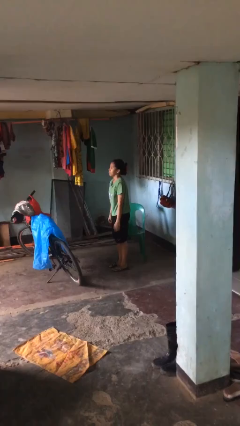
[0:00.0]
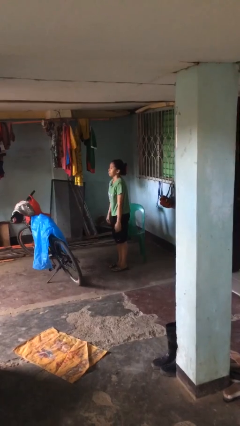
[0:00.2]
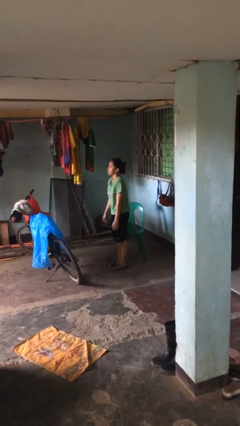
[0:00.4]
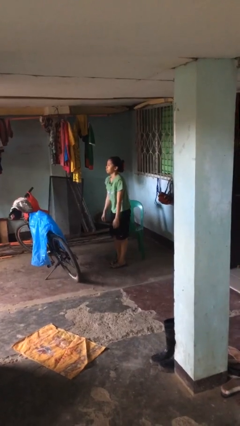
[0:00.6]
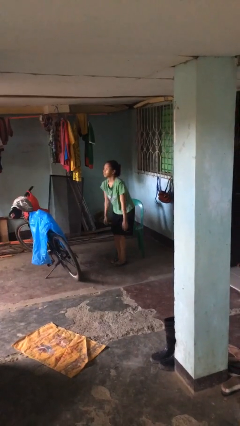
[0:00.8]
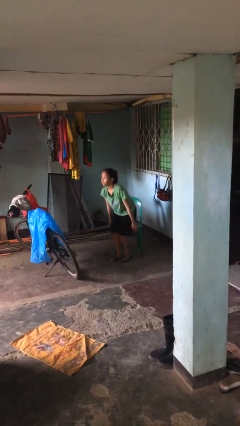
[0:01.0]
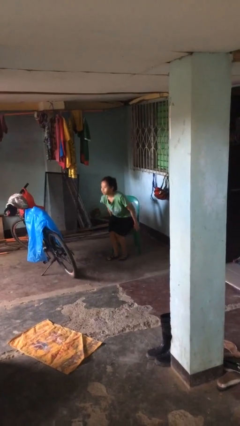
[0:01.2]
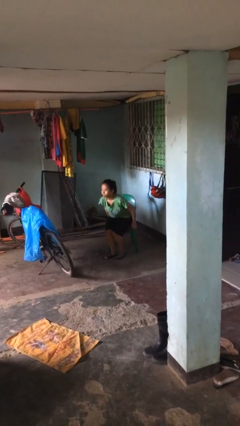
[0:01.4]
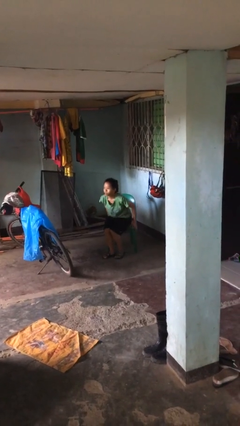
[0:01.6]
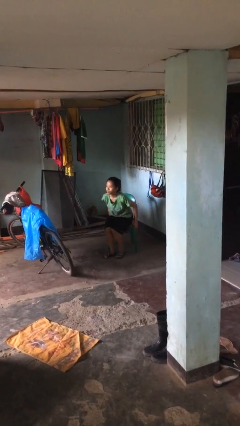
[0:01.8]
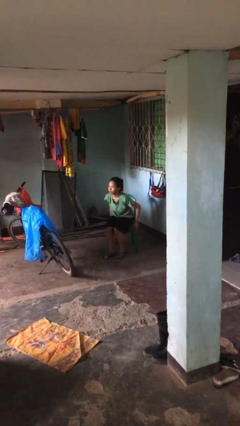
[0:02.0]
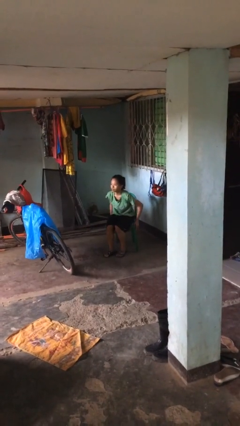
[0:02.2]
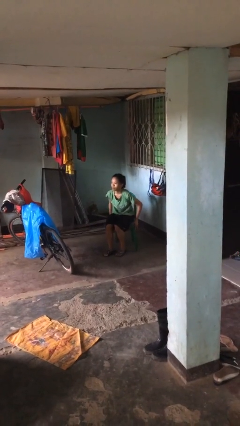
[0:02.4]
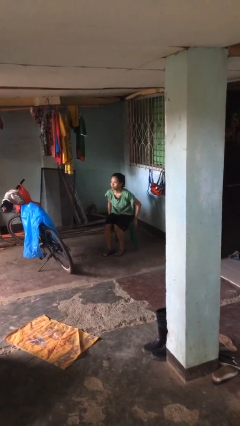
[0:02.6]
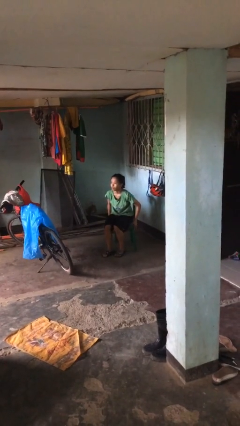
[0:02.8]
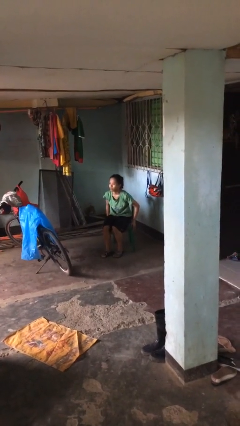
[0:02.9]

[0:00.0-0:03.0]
person sits down

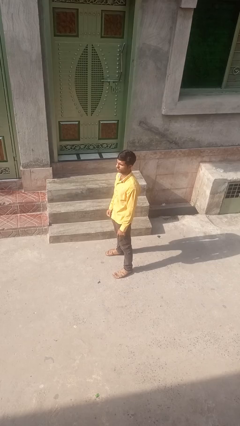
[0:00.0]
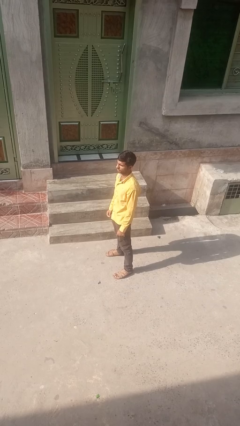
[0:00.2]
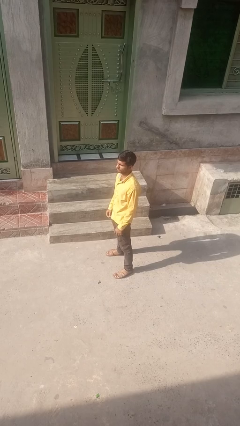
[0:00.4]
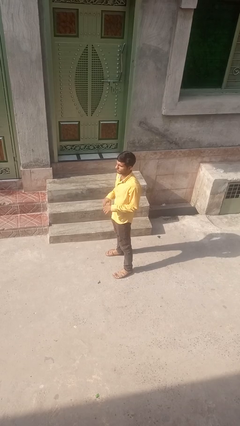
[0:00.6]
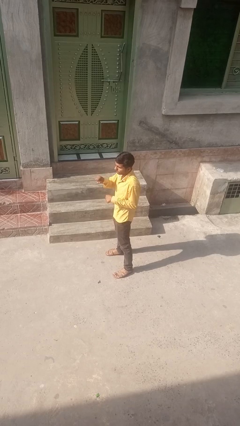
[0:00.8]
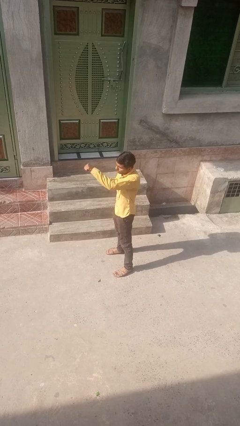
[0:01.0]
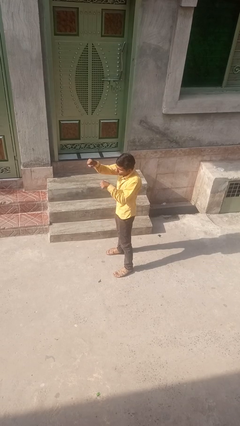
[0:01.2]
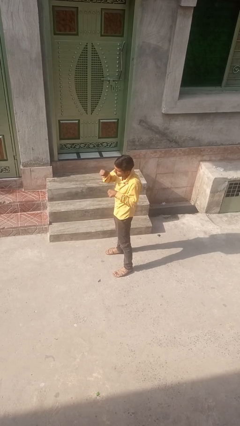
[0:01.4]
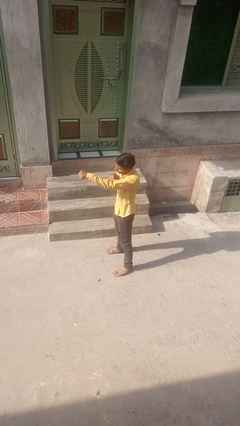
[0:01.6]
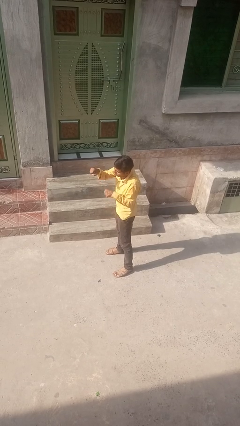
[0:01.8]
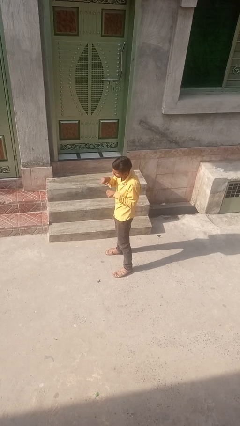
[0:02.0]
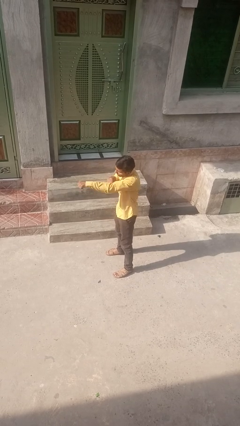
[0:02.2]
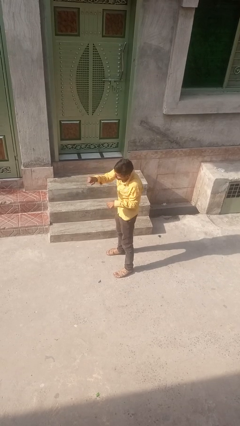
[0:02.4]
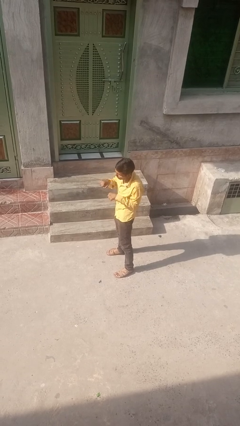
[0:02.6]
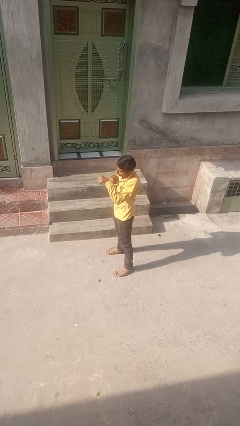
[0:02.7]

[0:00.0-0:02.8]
person punches

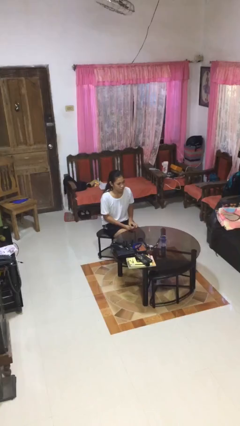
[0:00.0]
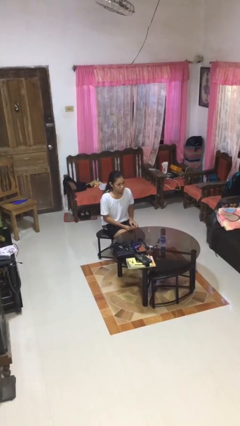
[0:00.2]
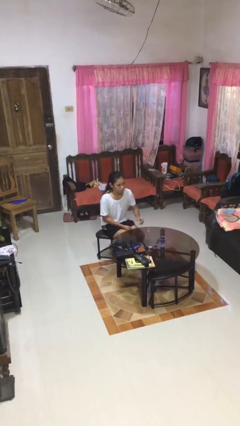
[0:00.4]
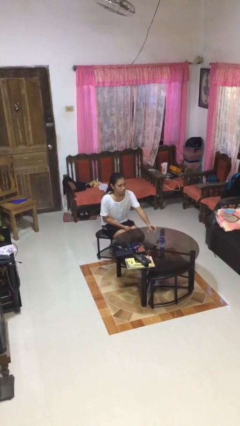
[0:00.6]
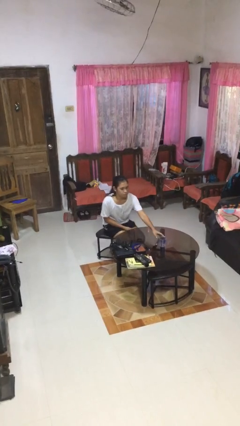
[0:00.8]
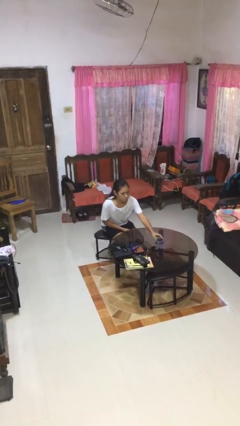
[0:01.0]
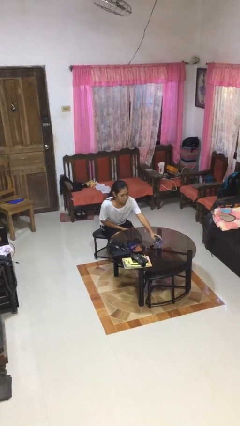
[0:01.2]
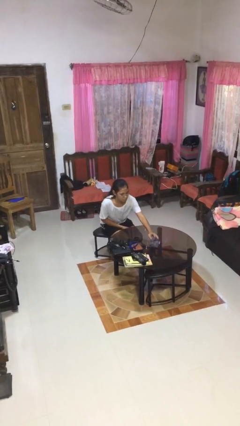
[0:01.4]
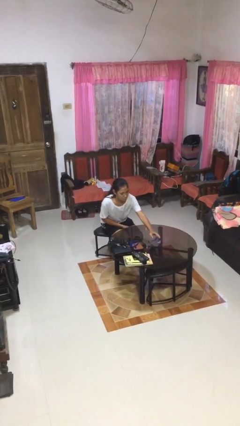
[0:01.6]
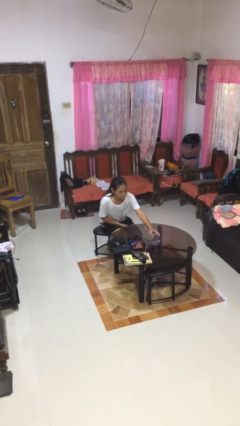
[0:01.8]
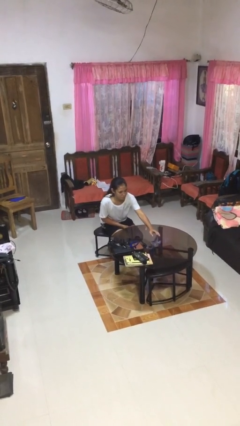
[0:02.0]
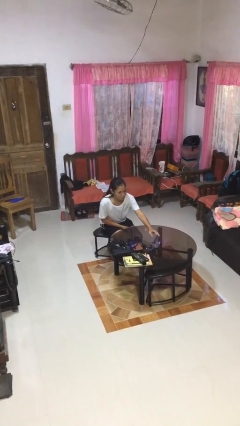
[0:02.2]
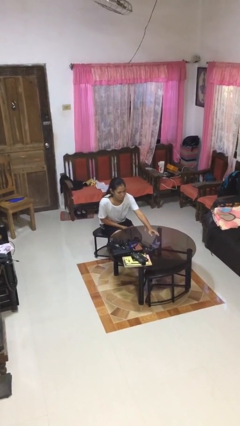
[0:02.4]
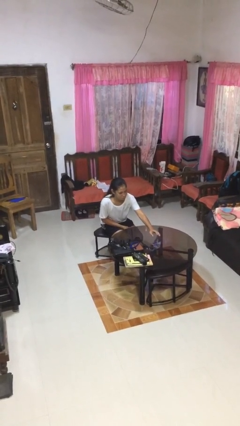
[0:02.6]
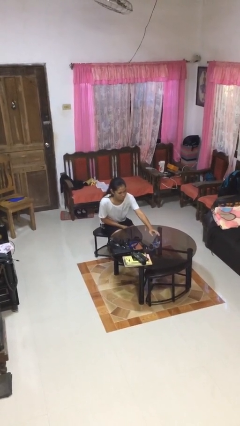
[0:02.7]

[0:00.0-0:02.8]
person knocks over glass

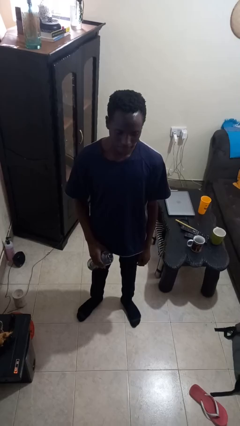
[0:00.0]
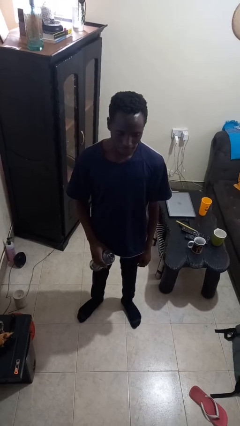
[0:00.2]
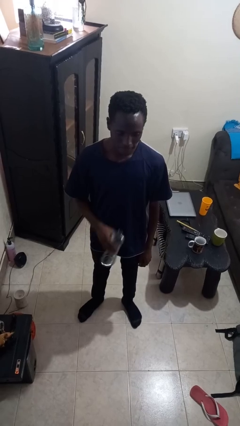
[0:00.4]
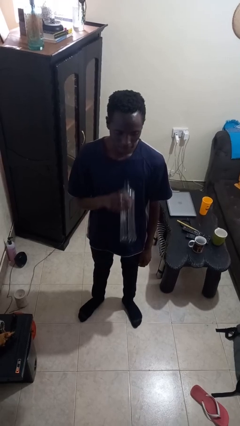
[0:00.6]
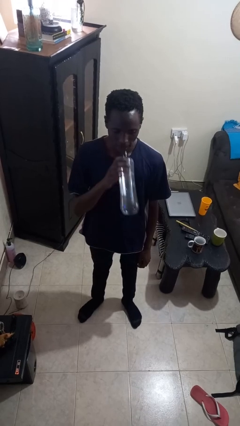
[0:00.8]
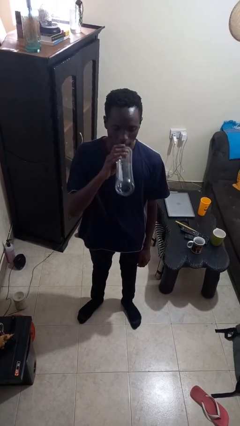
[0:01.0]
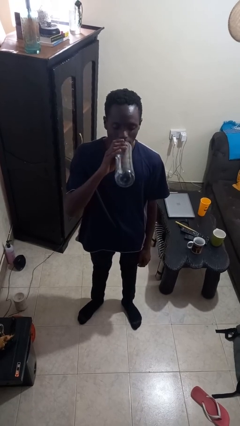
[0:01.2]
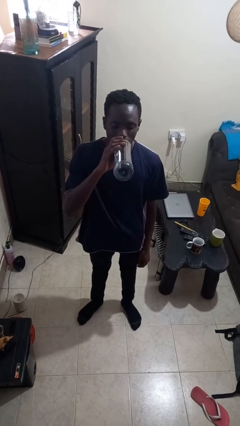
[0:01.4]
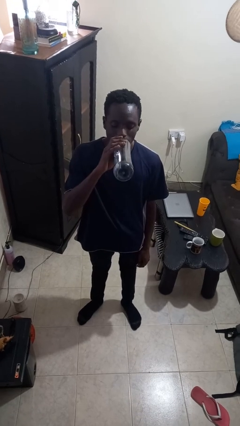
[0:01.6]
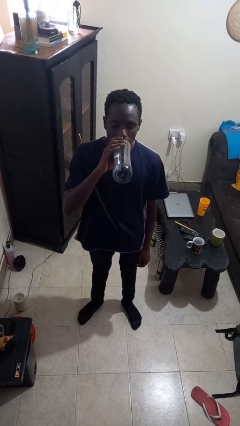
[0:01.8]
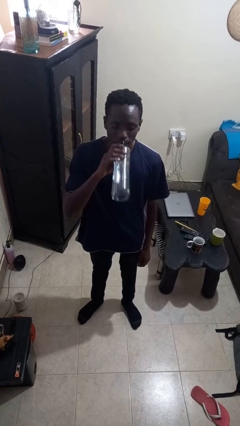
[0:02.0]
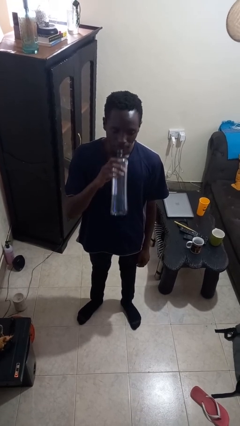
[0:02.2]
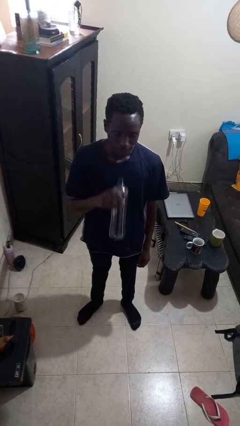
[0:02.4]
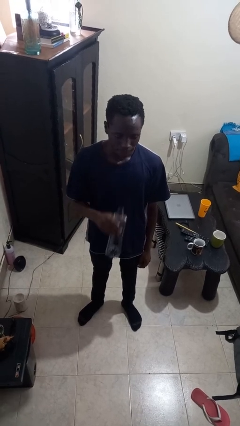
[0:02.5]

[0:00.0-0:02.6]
person drinks from bottle

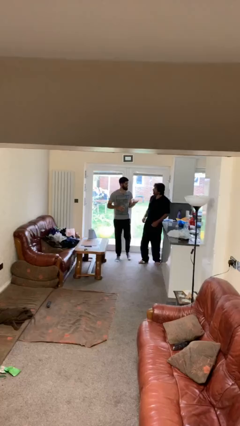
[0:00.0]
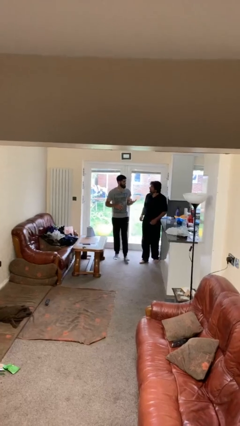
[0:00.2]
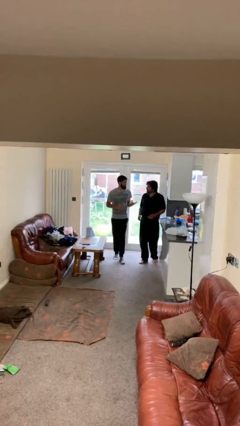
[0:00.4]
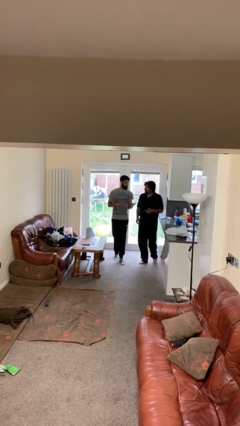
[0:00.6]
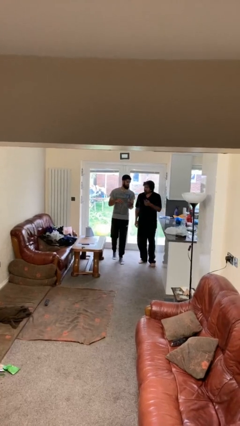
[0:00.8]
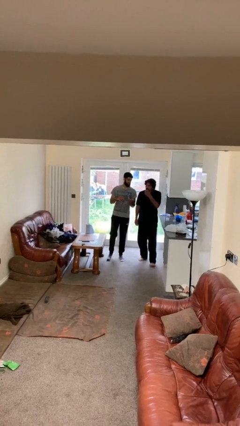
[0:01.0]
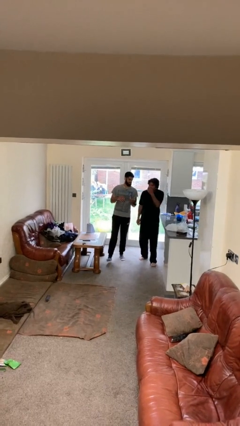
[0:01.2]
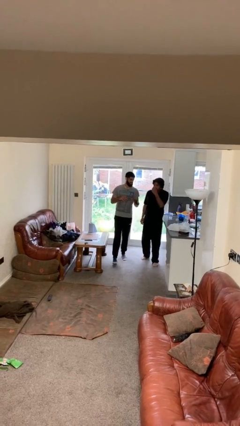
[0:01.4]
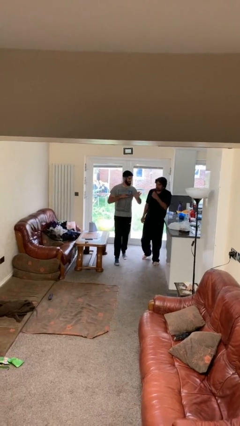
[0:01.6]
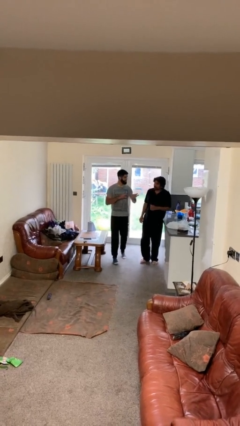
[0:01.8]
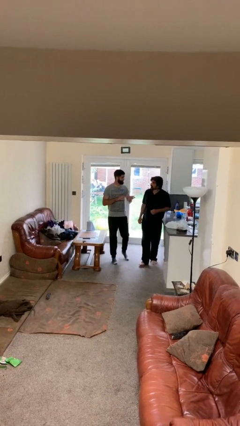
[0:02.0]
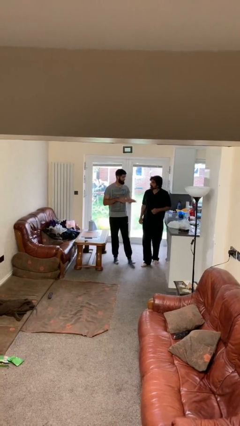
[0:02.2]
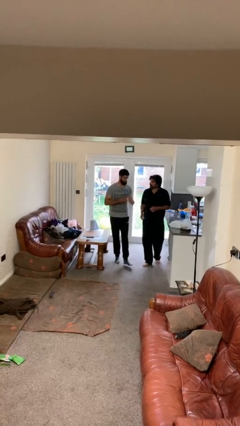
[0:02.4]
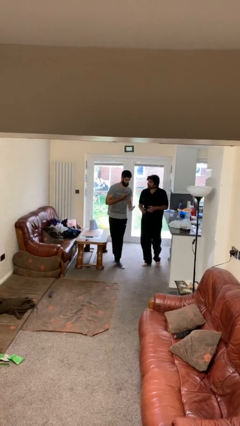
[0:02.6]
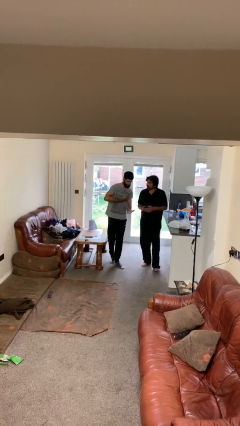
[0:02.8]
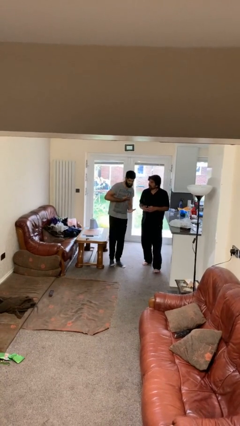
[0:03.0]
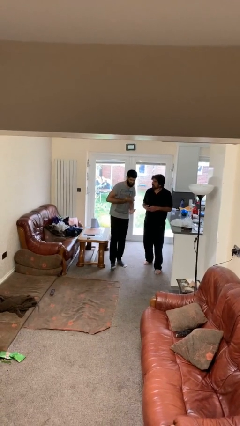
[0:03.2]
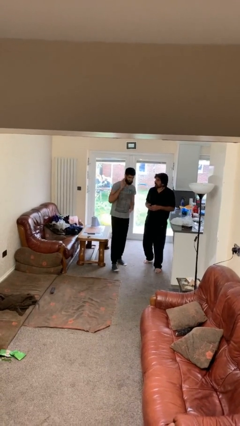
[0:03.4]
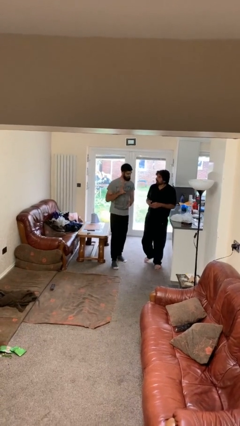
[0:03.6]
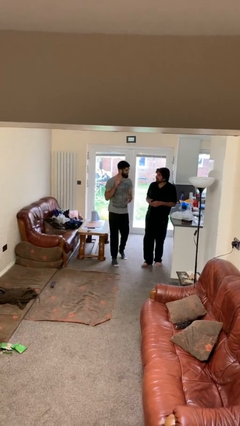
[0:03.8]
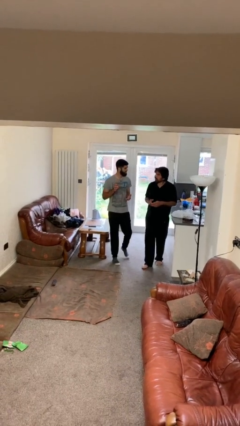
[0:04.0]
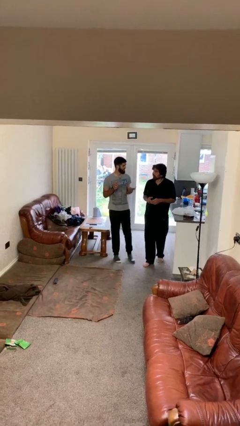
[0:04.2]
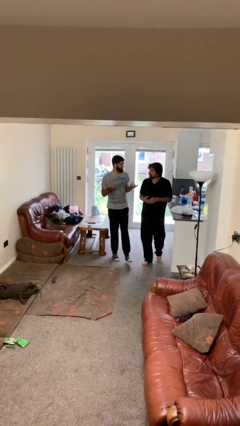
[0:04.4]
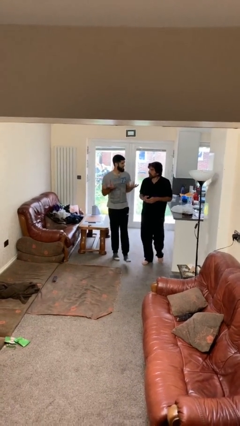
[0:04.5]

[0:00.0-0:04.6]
person talks to person

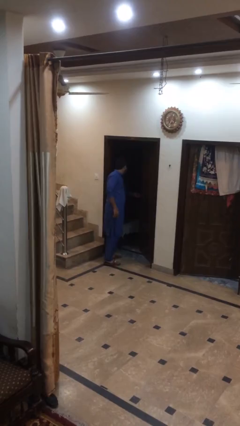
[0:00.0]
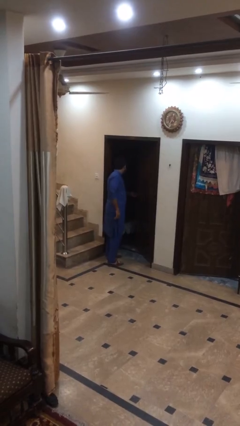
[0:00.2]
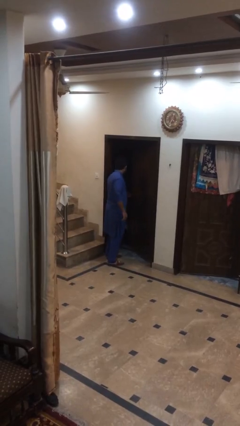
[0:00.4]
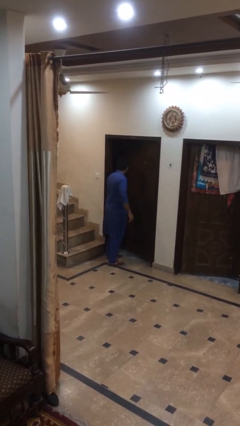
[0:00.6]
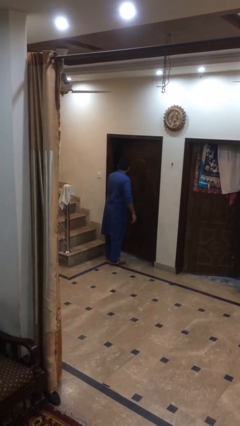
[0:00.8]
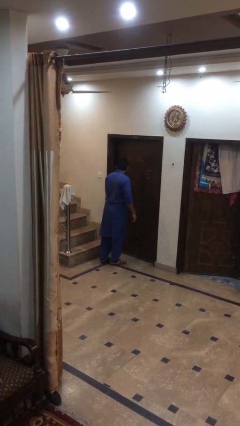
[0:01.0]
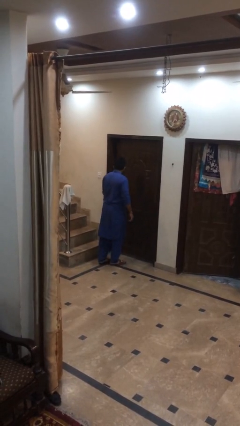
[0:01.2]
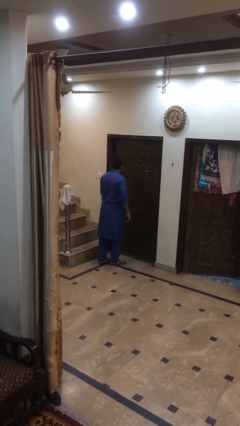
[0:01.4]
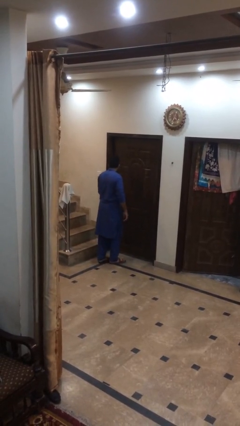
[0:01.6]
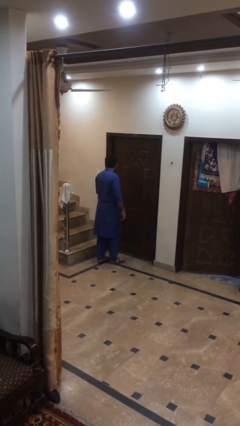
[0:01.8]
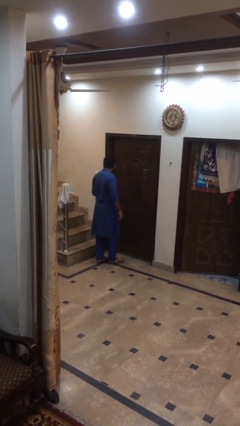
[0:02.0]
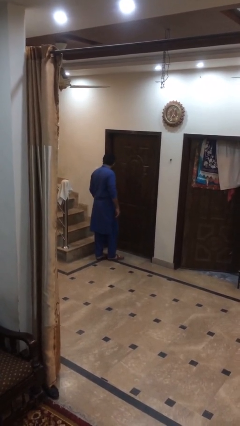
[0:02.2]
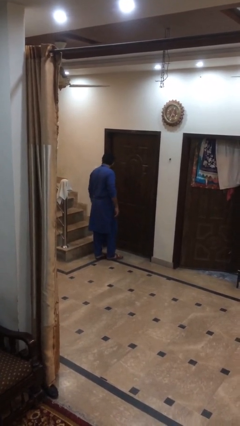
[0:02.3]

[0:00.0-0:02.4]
person closes facility door
